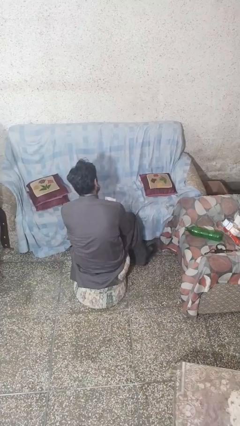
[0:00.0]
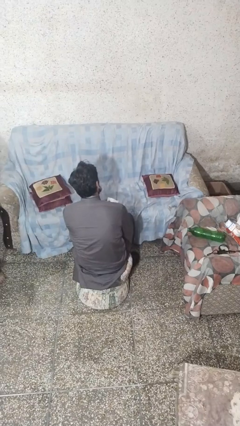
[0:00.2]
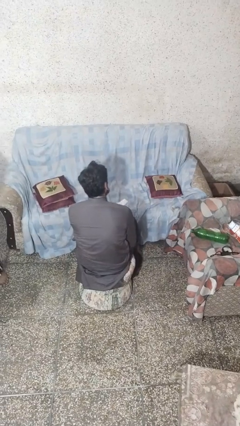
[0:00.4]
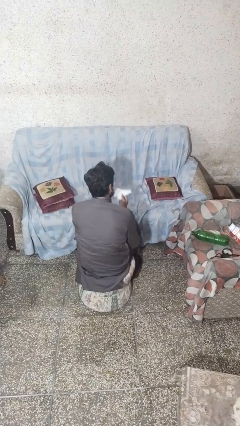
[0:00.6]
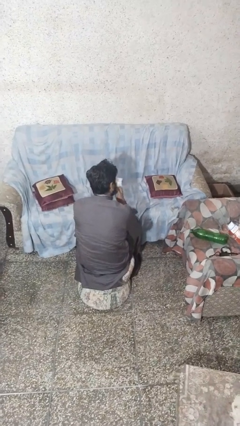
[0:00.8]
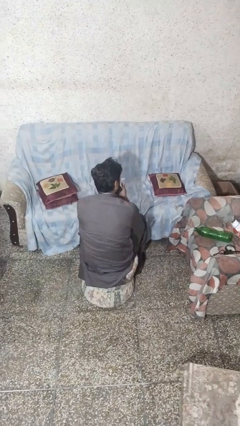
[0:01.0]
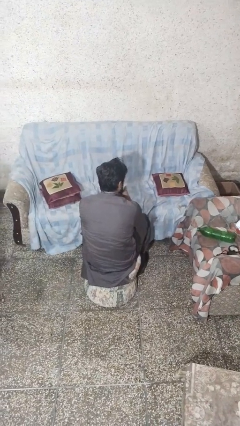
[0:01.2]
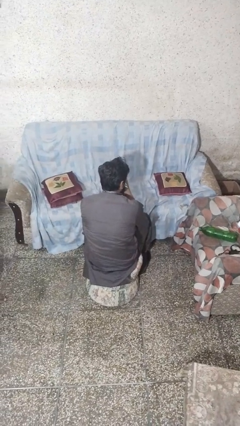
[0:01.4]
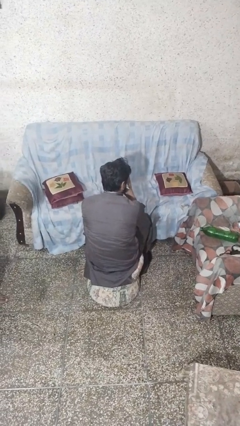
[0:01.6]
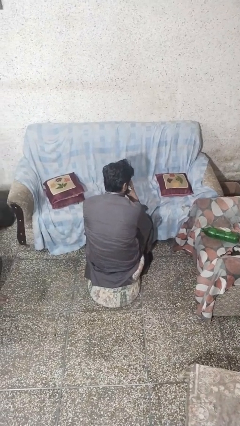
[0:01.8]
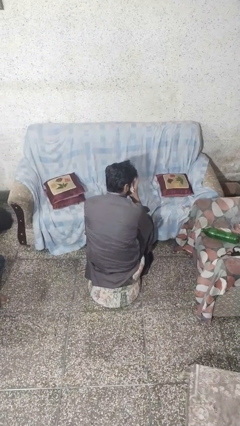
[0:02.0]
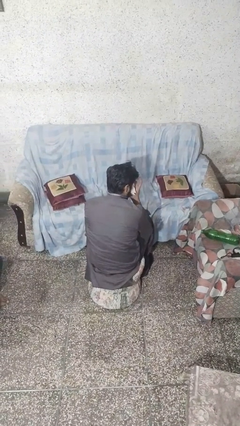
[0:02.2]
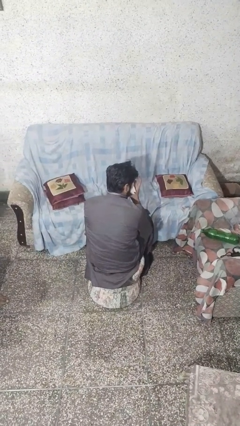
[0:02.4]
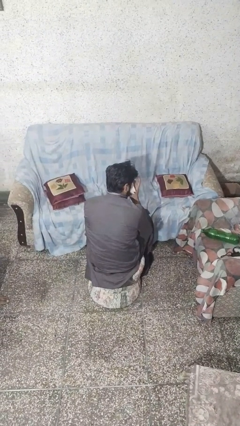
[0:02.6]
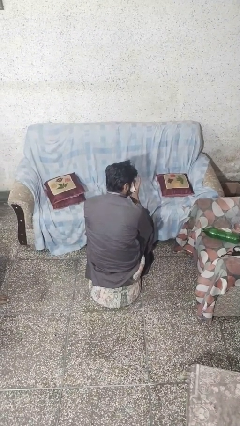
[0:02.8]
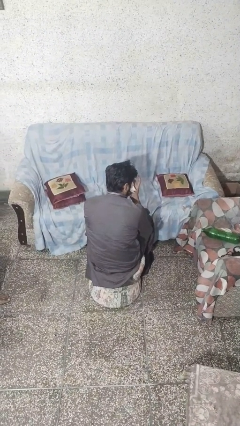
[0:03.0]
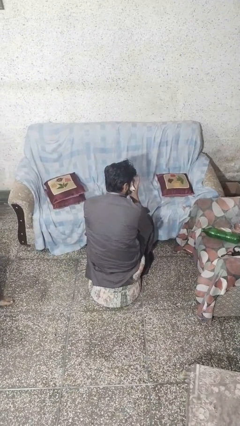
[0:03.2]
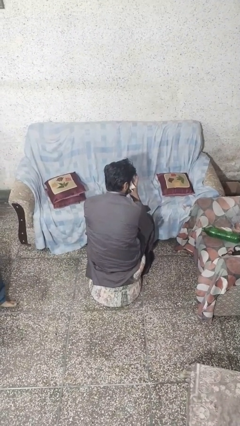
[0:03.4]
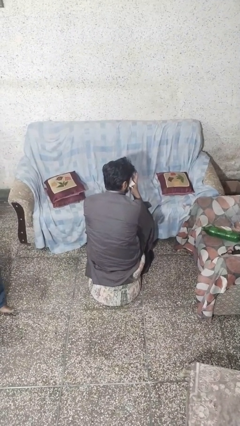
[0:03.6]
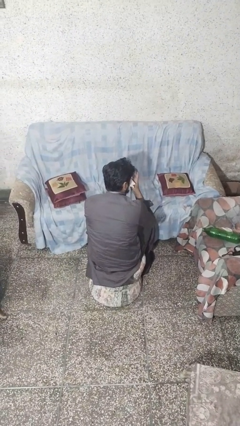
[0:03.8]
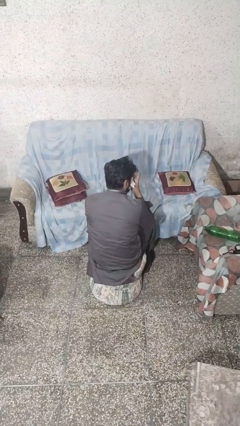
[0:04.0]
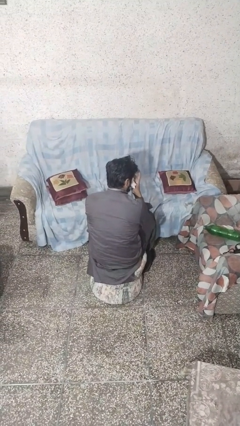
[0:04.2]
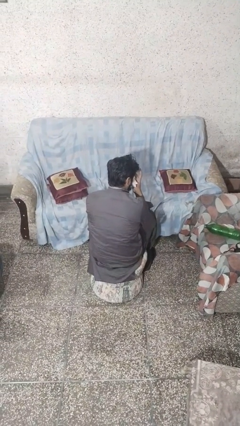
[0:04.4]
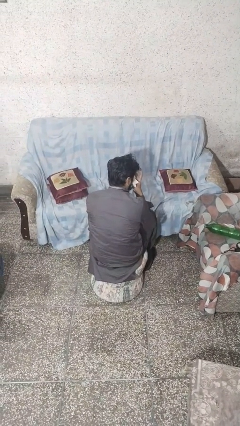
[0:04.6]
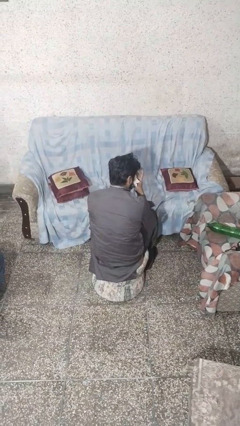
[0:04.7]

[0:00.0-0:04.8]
person blows nose

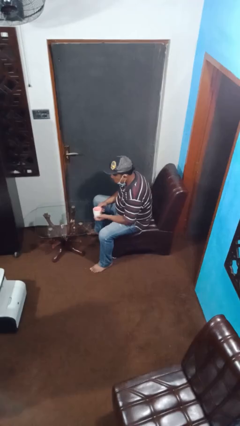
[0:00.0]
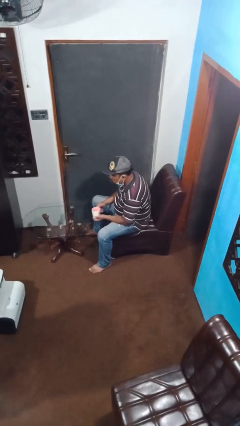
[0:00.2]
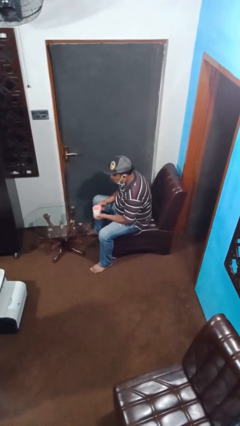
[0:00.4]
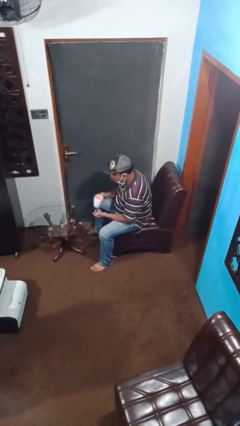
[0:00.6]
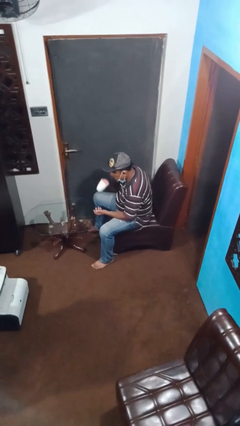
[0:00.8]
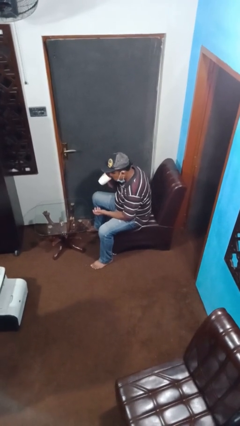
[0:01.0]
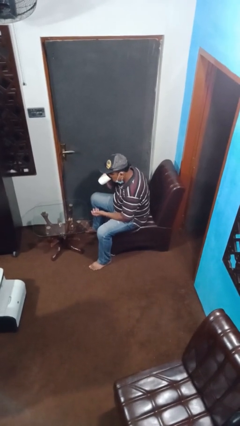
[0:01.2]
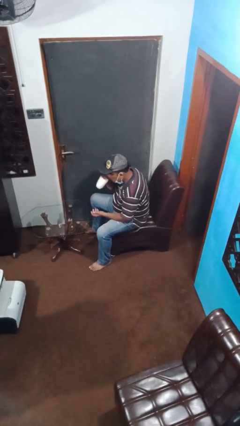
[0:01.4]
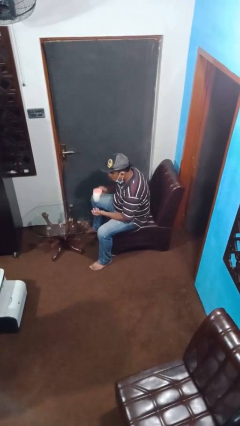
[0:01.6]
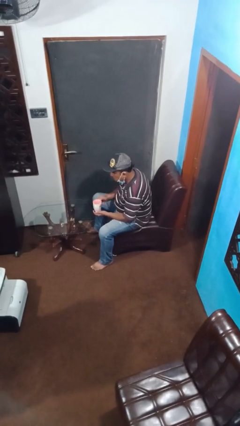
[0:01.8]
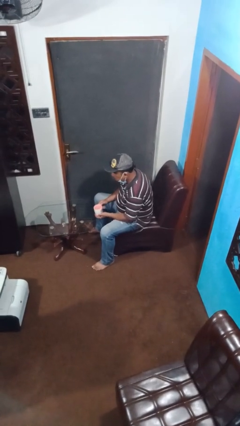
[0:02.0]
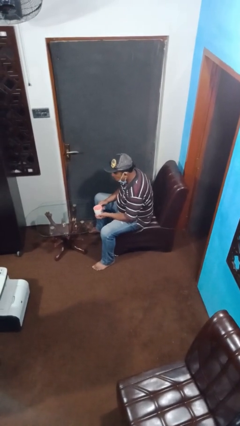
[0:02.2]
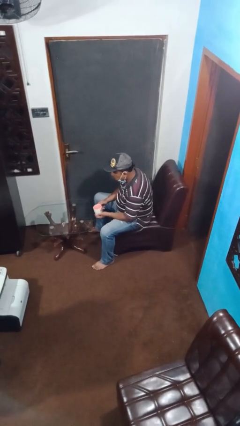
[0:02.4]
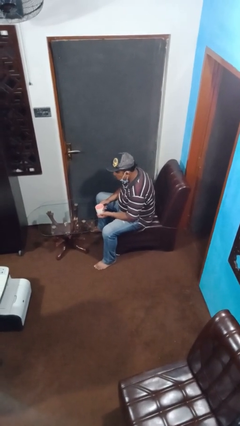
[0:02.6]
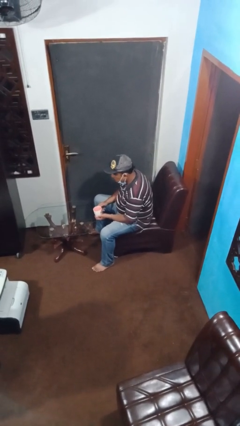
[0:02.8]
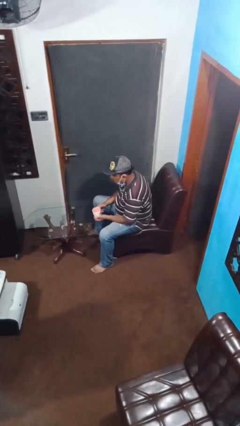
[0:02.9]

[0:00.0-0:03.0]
person drinks from mug

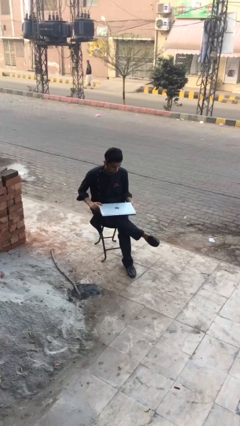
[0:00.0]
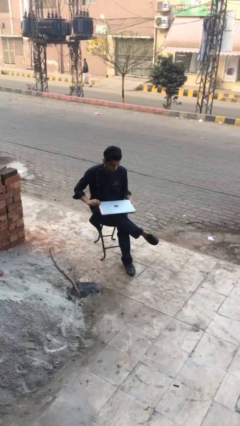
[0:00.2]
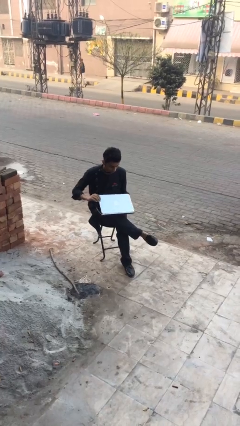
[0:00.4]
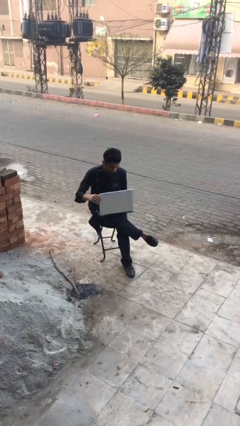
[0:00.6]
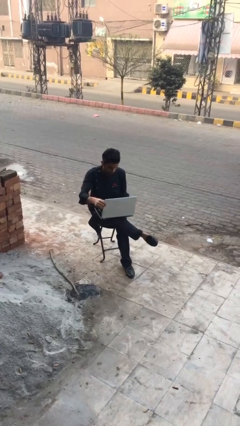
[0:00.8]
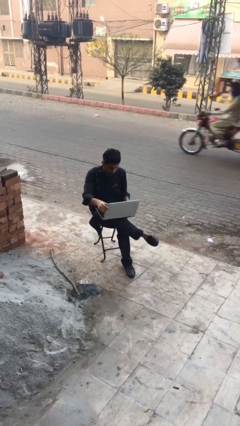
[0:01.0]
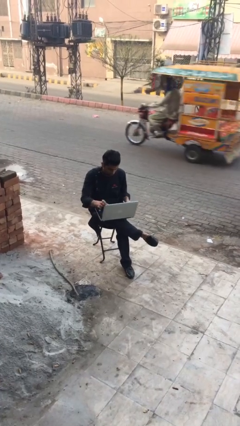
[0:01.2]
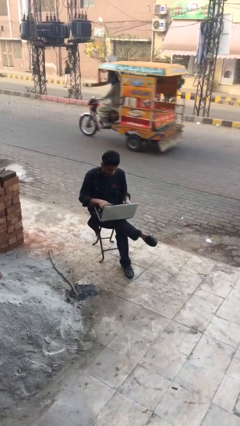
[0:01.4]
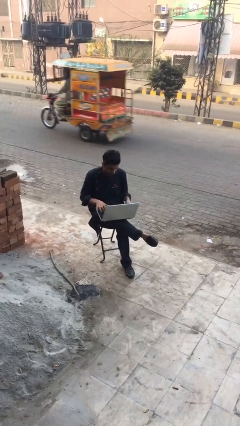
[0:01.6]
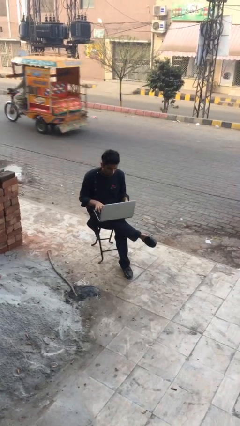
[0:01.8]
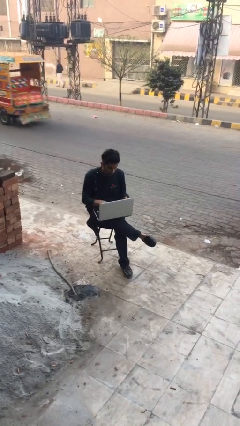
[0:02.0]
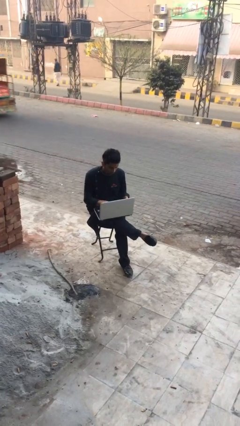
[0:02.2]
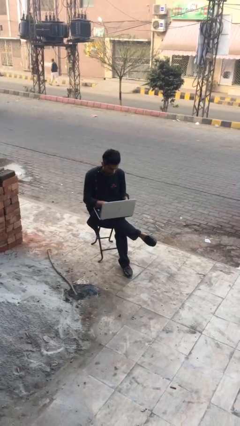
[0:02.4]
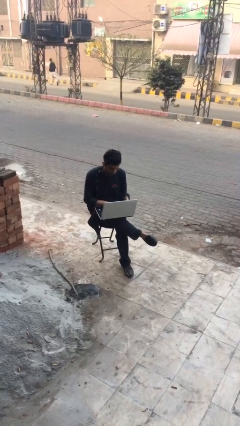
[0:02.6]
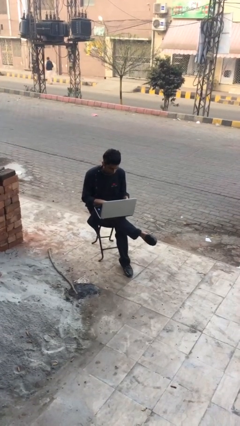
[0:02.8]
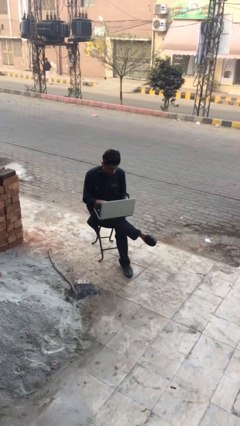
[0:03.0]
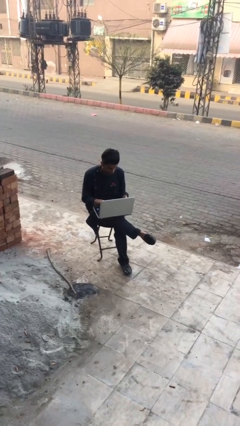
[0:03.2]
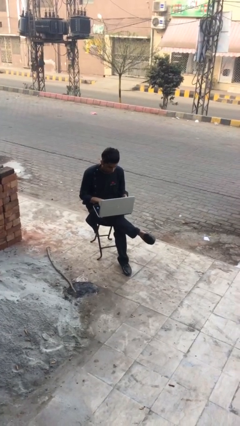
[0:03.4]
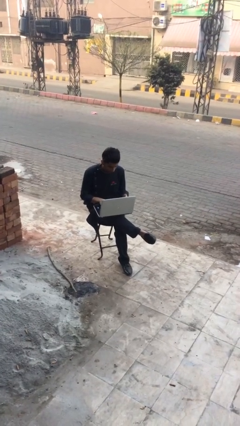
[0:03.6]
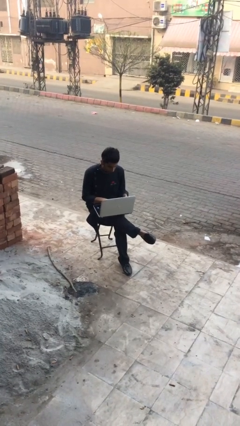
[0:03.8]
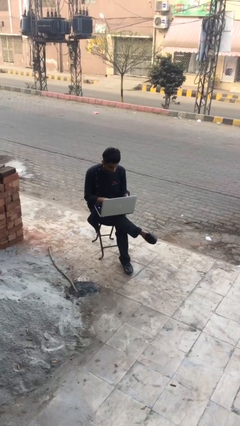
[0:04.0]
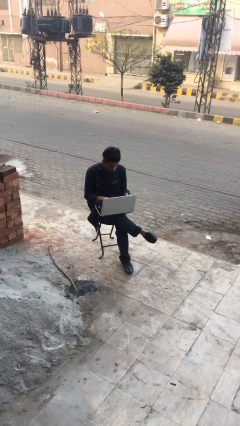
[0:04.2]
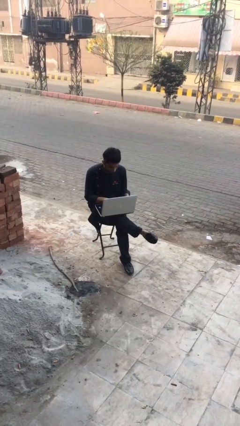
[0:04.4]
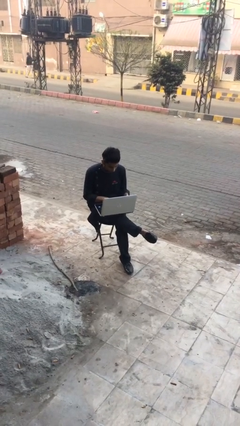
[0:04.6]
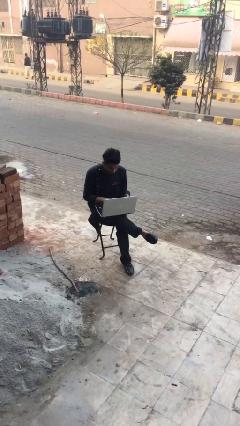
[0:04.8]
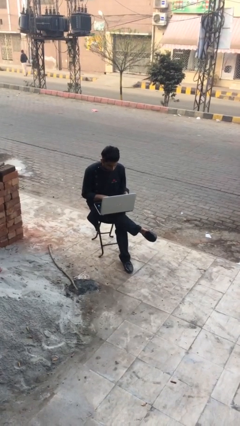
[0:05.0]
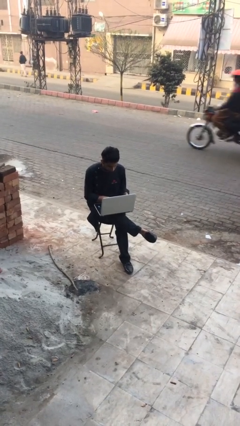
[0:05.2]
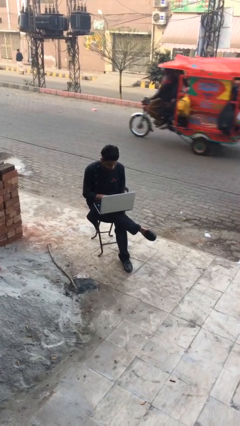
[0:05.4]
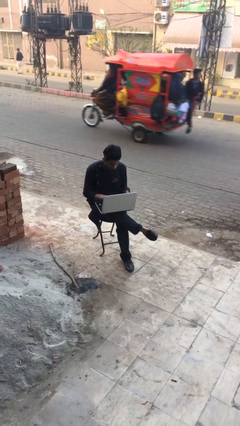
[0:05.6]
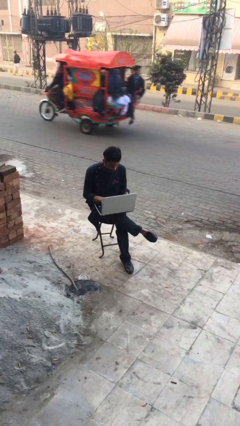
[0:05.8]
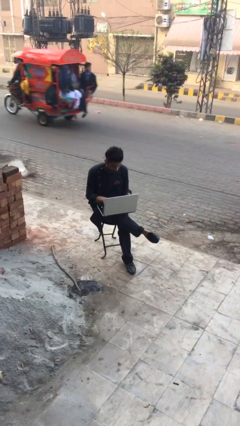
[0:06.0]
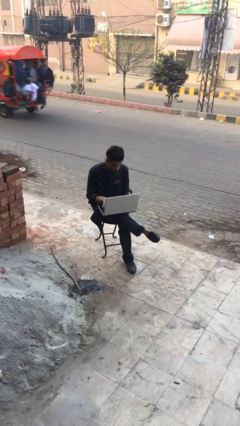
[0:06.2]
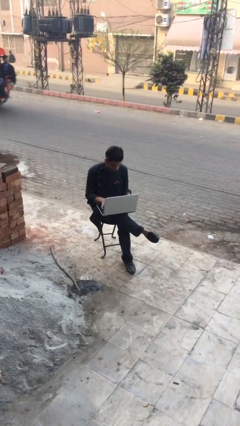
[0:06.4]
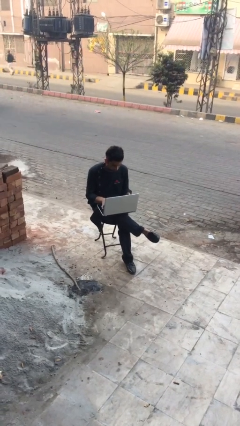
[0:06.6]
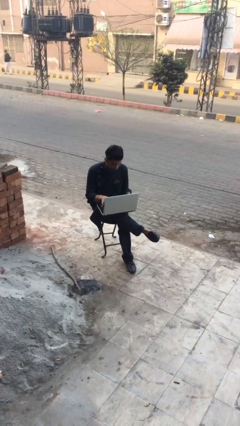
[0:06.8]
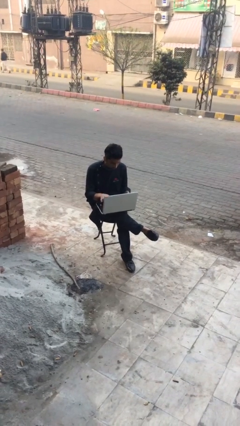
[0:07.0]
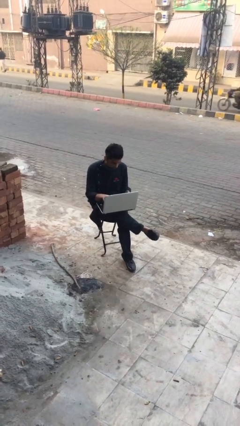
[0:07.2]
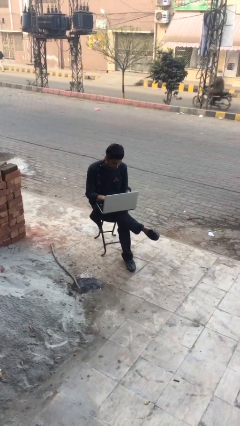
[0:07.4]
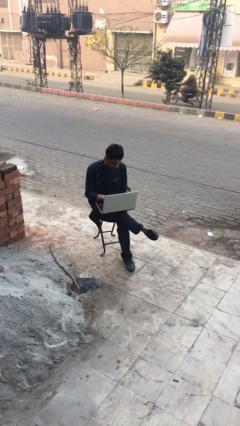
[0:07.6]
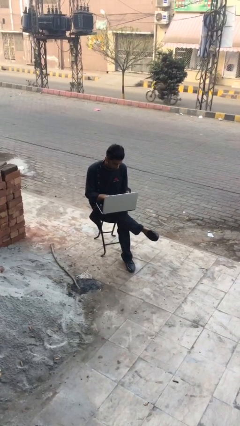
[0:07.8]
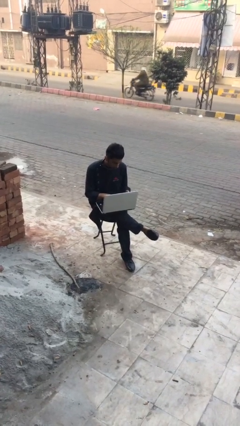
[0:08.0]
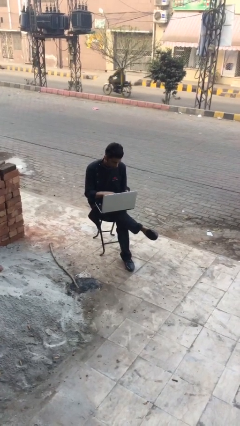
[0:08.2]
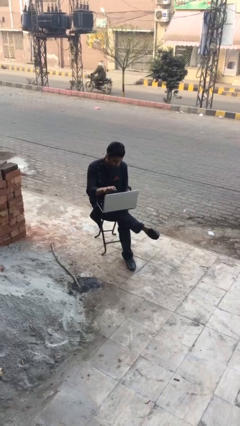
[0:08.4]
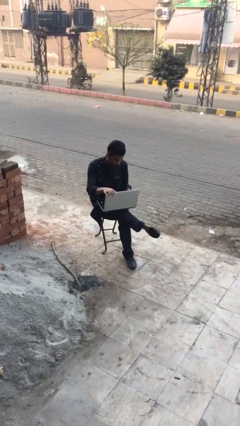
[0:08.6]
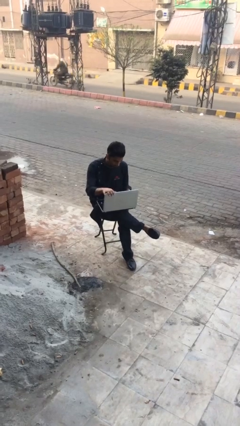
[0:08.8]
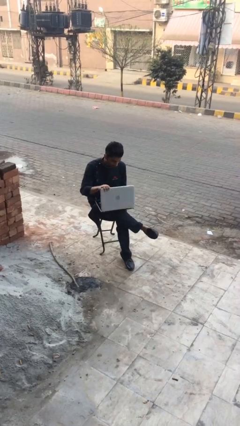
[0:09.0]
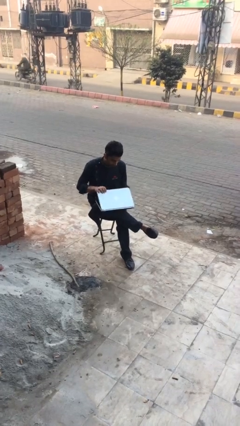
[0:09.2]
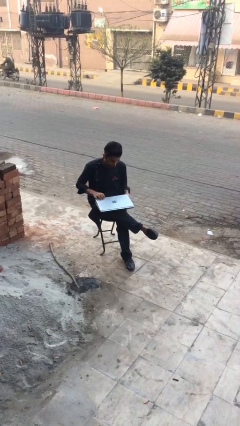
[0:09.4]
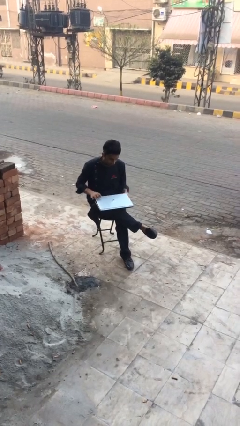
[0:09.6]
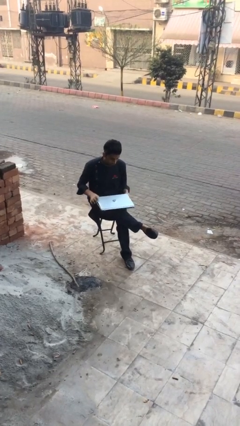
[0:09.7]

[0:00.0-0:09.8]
person interacts with laptop

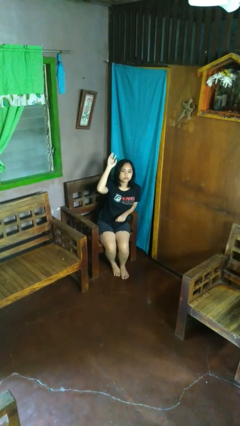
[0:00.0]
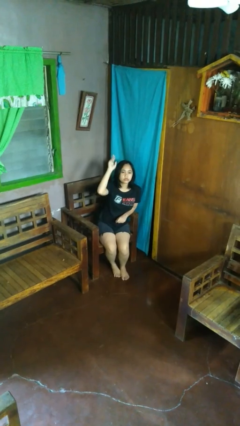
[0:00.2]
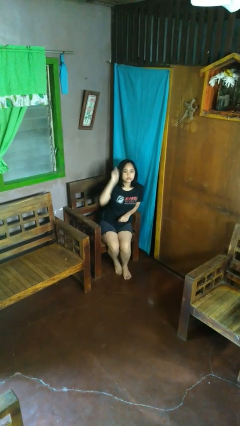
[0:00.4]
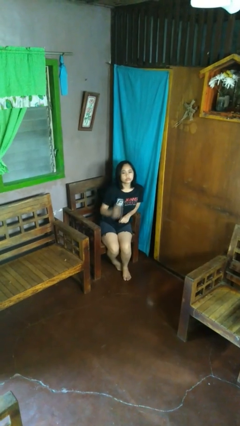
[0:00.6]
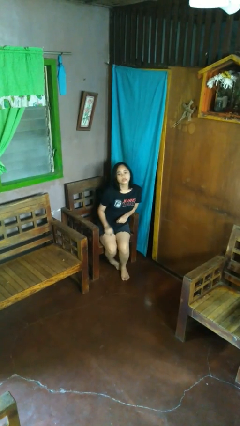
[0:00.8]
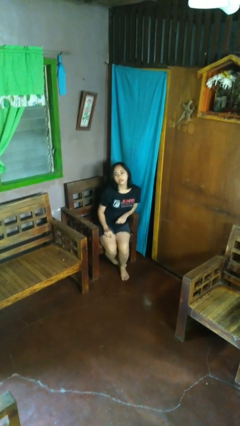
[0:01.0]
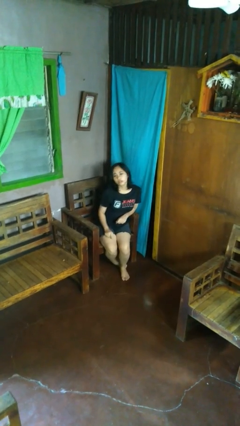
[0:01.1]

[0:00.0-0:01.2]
person gestures lower hand
